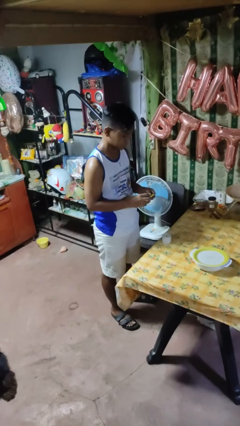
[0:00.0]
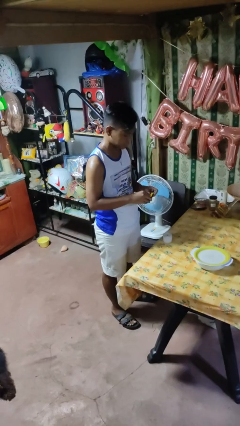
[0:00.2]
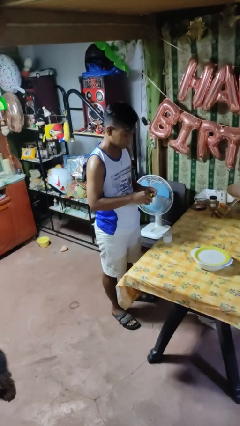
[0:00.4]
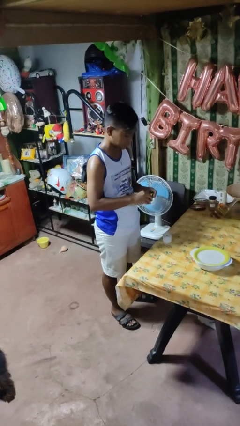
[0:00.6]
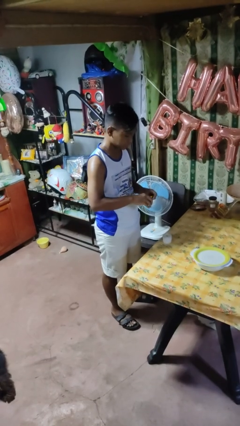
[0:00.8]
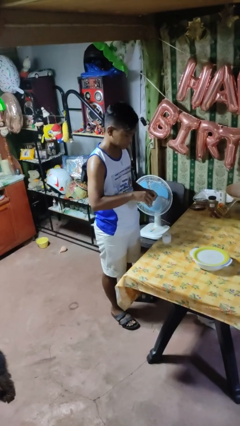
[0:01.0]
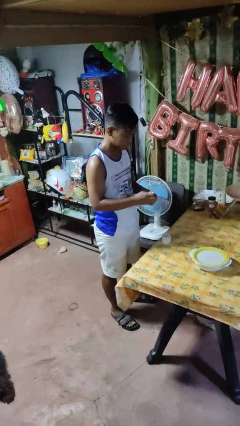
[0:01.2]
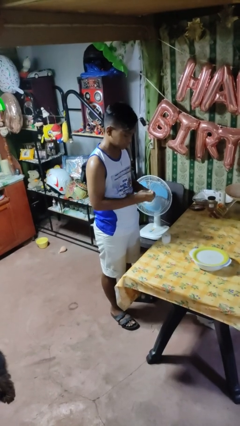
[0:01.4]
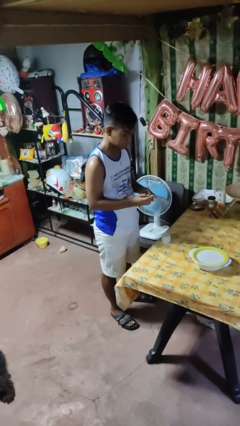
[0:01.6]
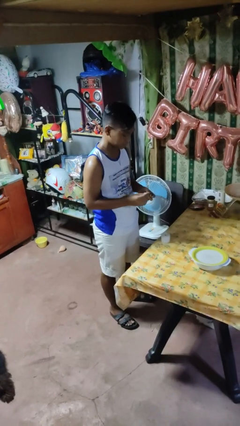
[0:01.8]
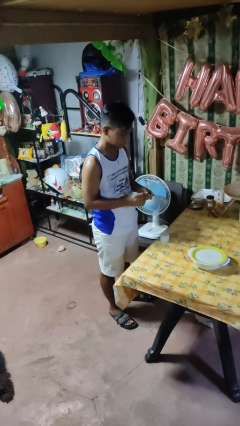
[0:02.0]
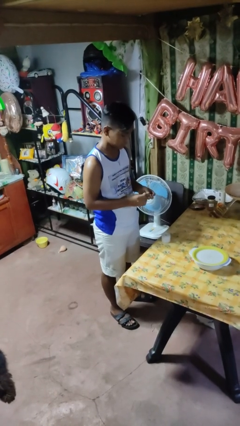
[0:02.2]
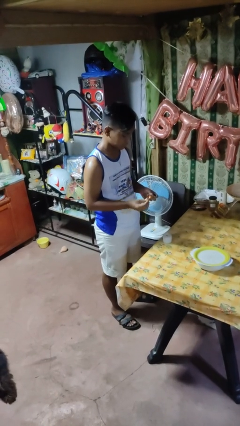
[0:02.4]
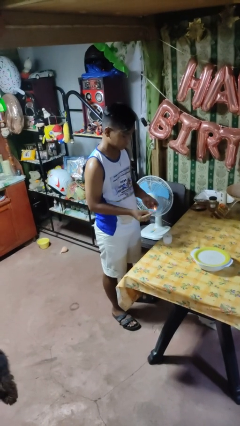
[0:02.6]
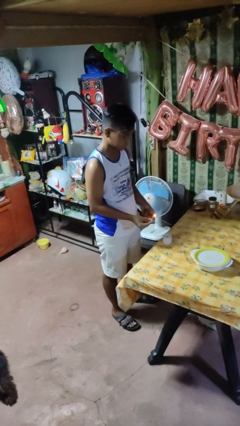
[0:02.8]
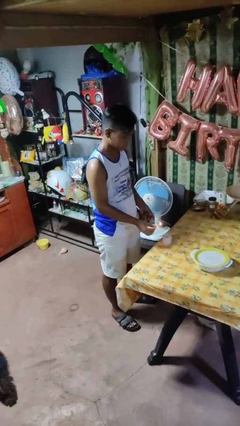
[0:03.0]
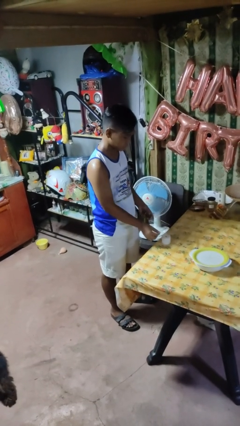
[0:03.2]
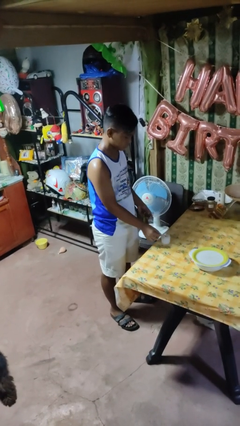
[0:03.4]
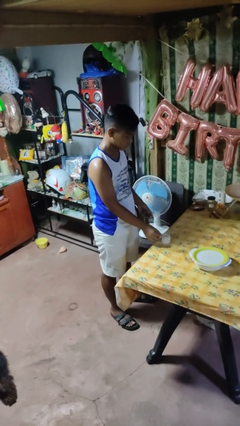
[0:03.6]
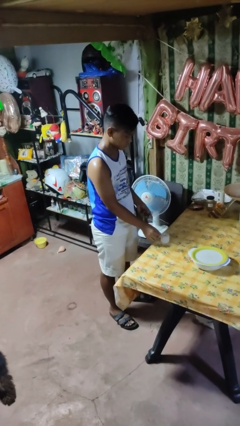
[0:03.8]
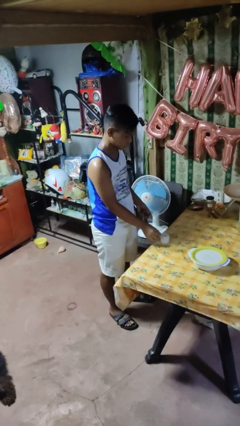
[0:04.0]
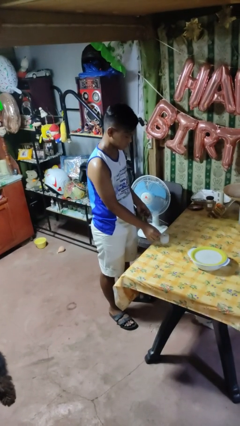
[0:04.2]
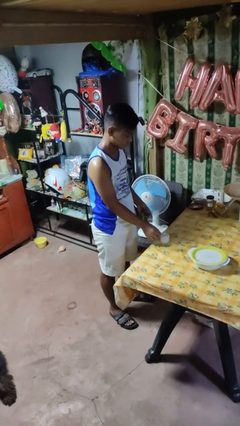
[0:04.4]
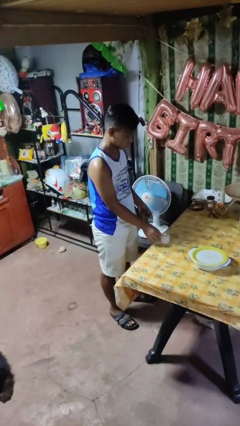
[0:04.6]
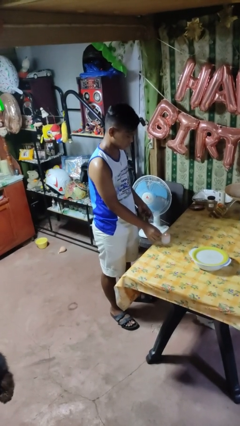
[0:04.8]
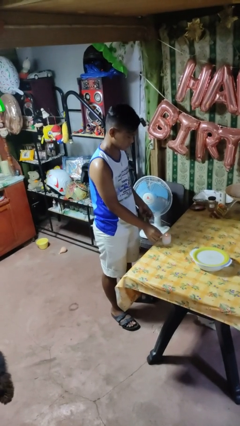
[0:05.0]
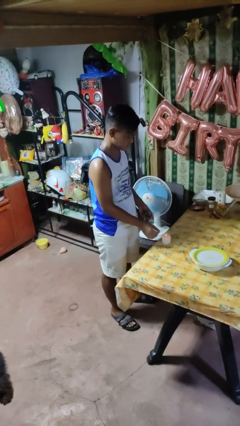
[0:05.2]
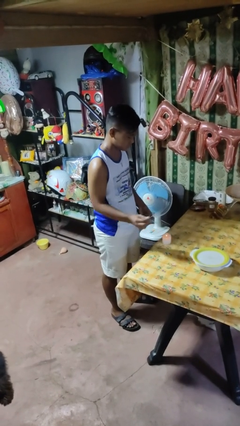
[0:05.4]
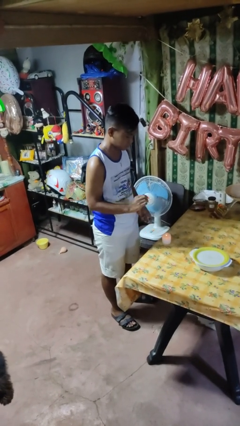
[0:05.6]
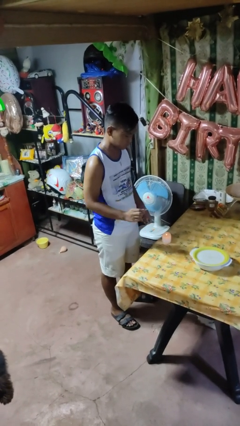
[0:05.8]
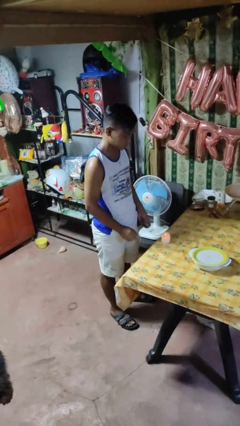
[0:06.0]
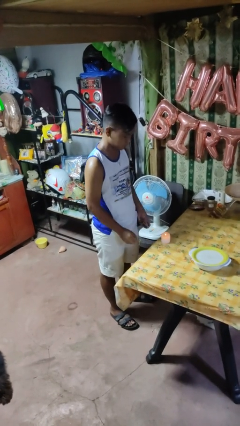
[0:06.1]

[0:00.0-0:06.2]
person lights candle

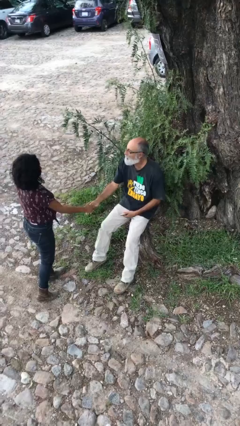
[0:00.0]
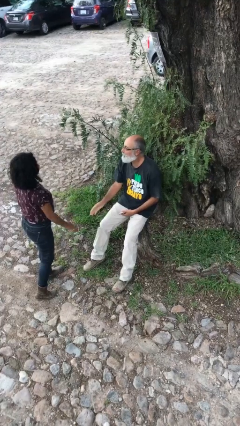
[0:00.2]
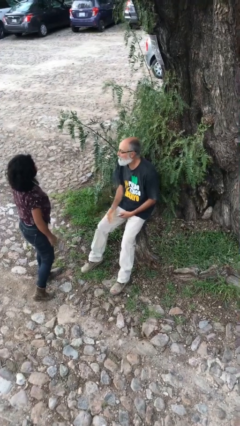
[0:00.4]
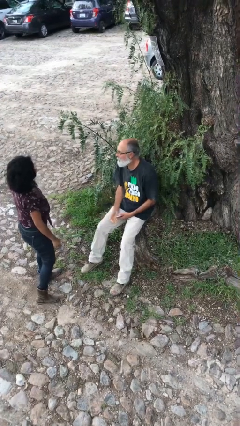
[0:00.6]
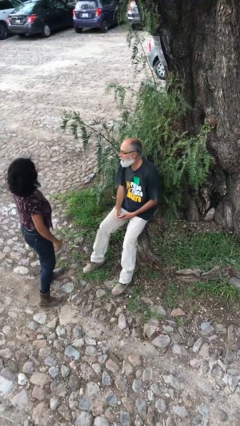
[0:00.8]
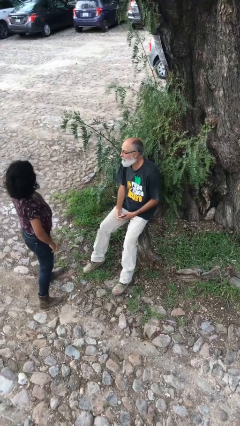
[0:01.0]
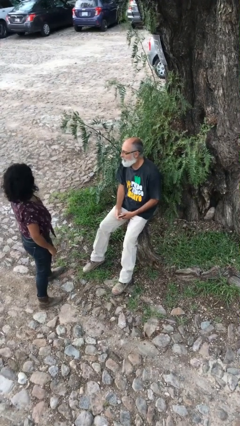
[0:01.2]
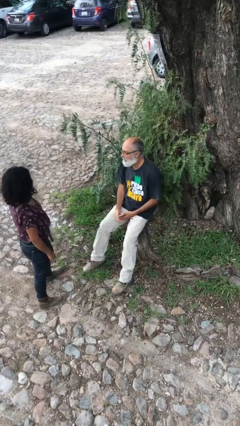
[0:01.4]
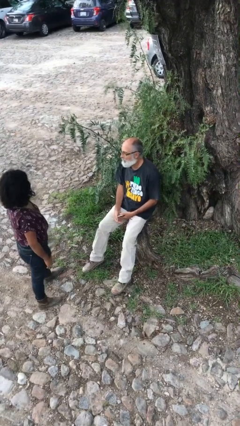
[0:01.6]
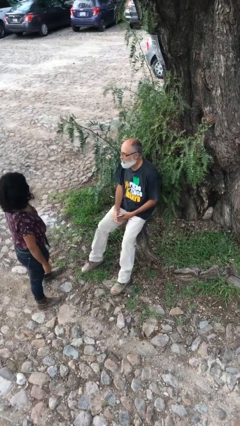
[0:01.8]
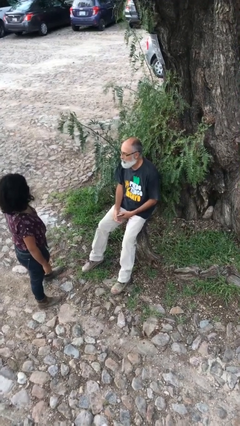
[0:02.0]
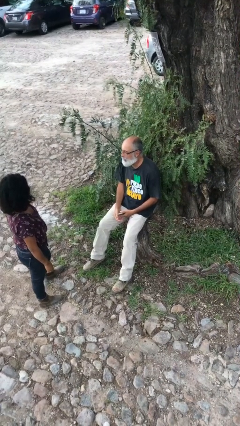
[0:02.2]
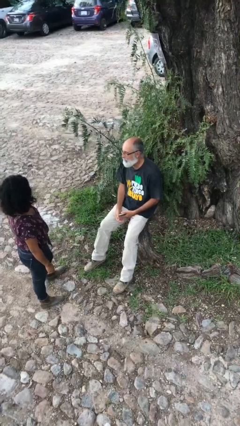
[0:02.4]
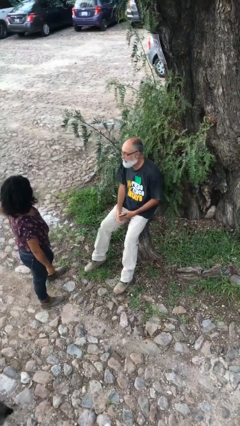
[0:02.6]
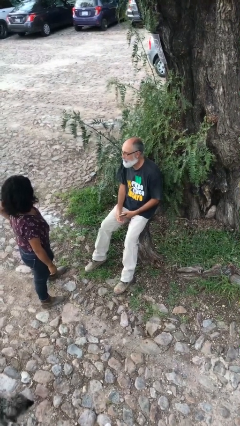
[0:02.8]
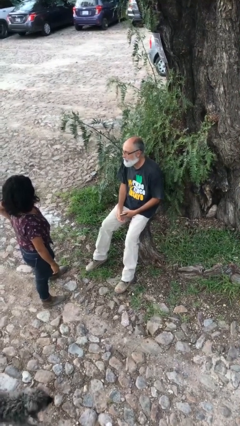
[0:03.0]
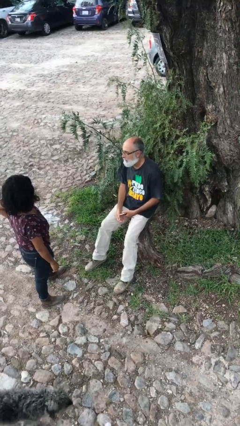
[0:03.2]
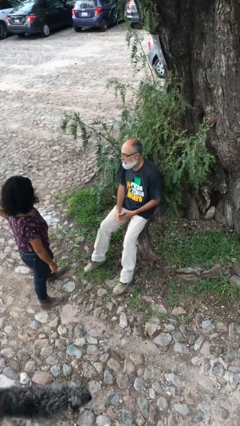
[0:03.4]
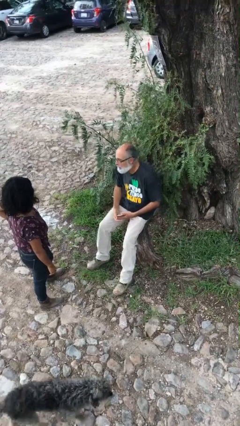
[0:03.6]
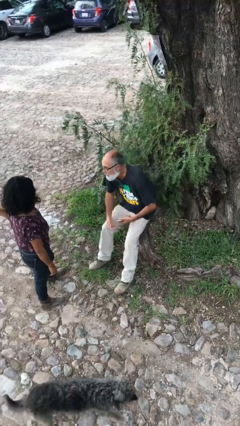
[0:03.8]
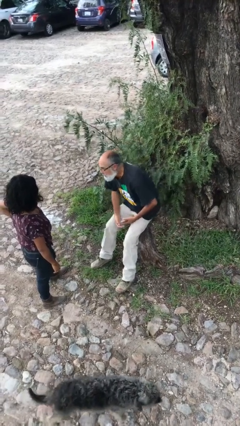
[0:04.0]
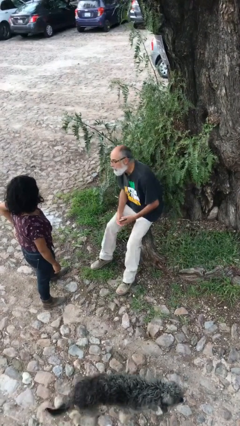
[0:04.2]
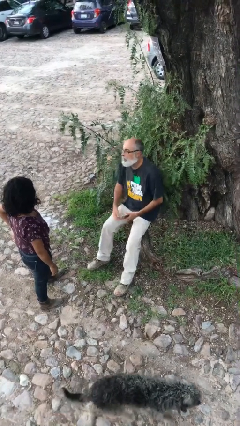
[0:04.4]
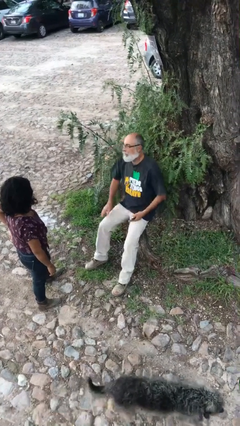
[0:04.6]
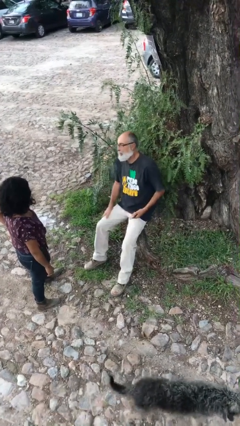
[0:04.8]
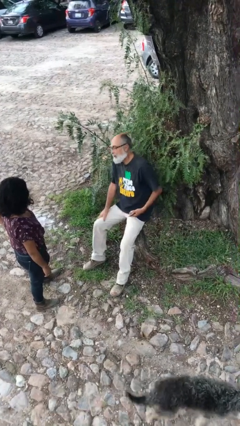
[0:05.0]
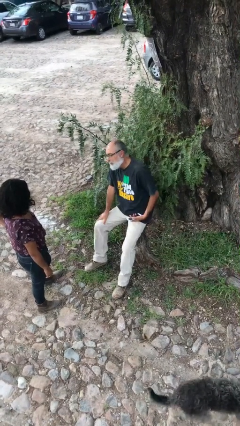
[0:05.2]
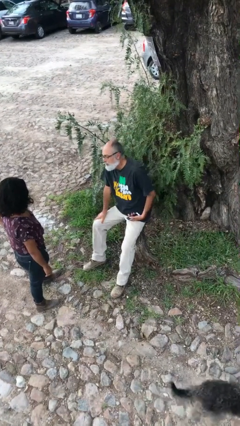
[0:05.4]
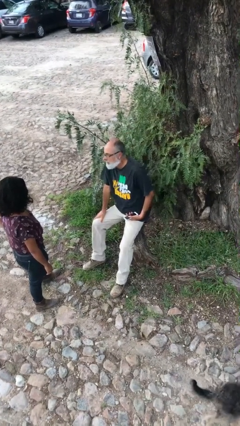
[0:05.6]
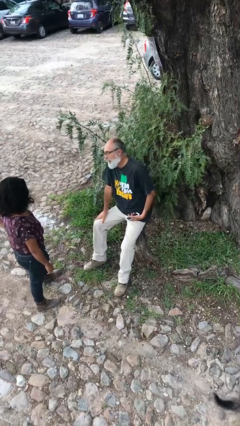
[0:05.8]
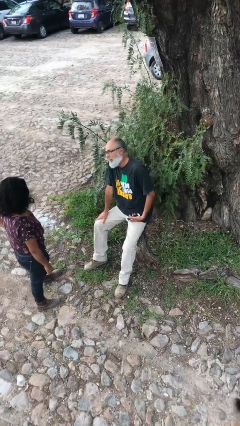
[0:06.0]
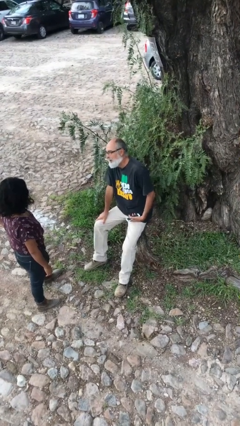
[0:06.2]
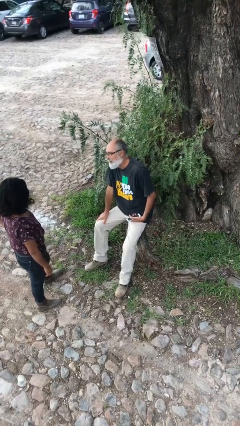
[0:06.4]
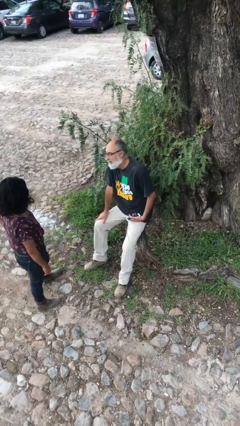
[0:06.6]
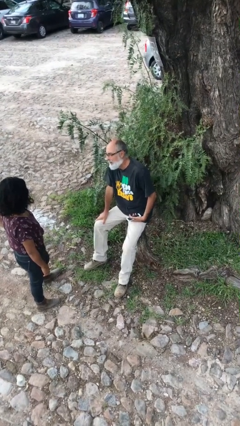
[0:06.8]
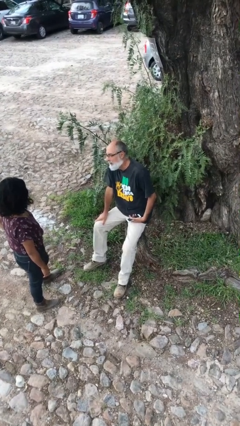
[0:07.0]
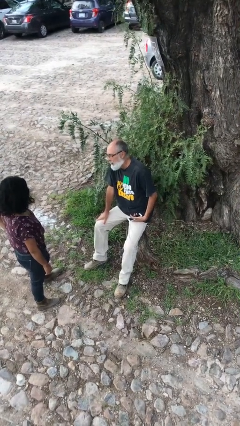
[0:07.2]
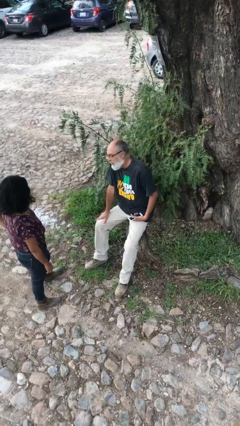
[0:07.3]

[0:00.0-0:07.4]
person talks to person

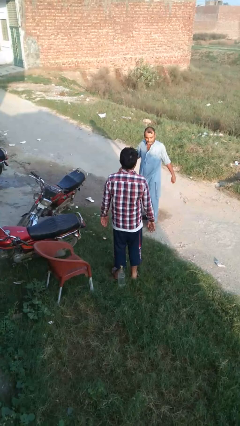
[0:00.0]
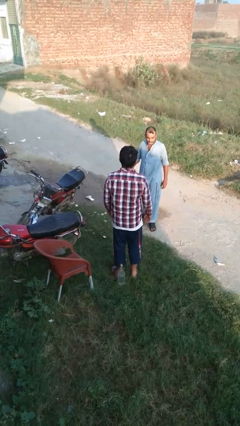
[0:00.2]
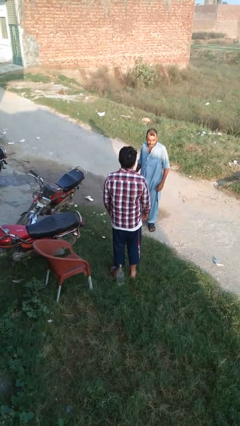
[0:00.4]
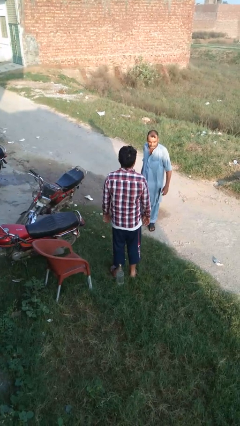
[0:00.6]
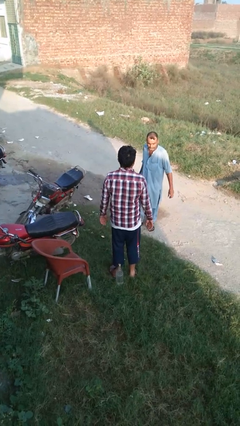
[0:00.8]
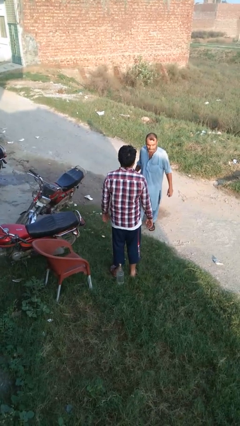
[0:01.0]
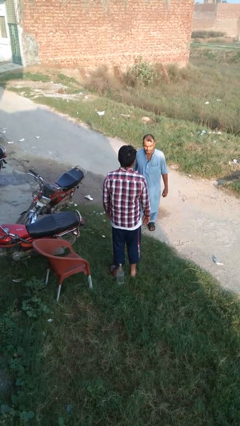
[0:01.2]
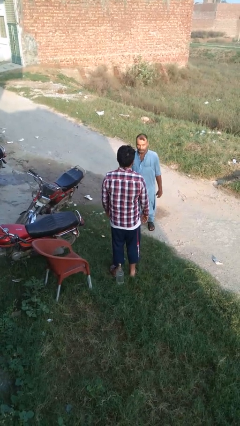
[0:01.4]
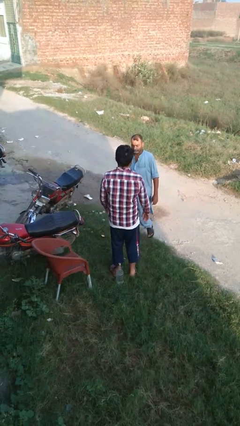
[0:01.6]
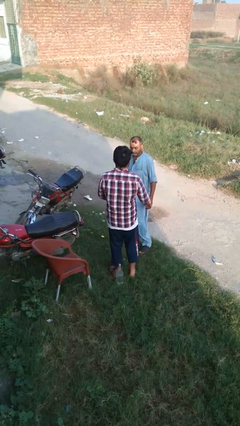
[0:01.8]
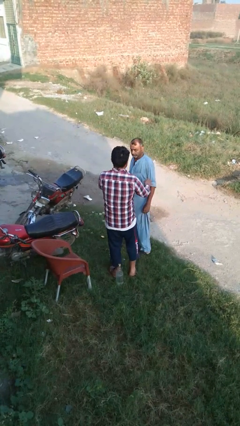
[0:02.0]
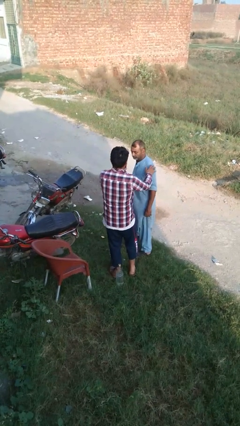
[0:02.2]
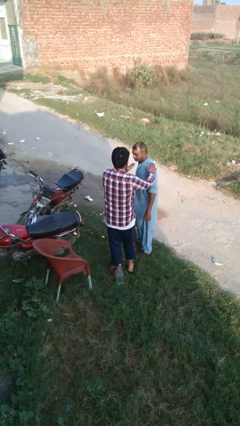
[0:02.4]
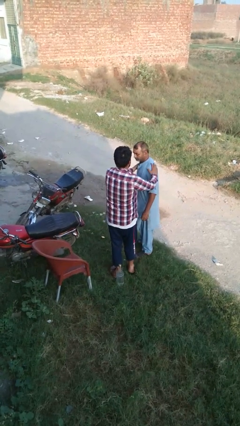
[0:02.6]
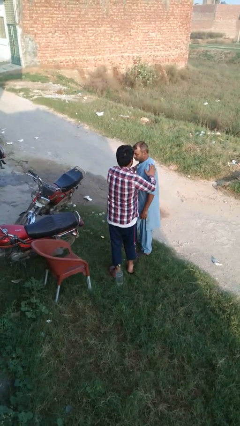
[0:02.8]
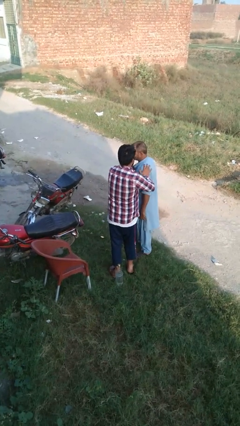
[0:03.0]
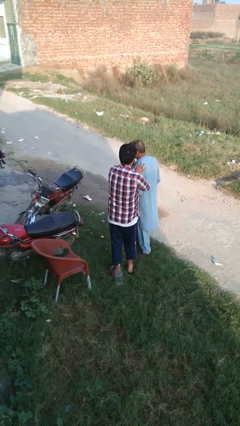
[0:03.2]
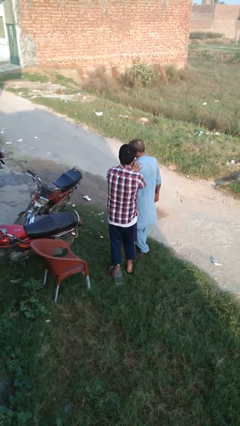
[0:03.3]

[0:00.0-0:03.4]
person grabs person by shoulder

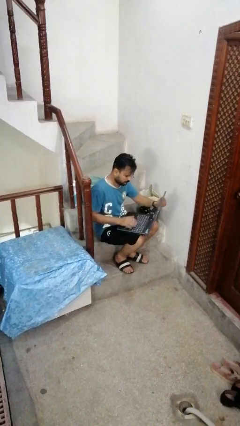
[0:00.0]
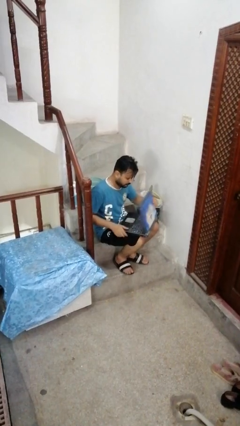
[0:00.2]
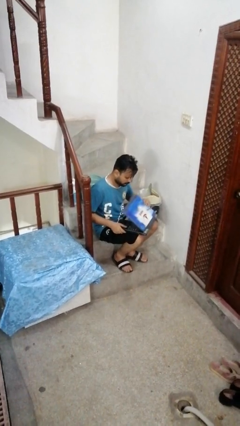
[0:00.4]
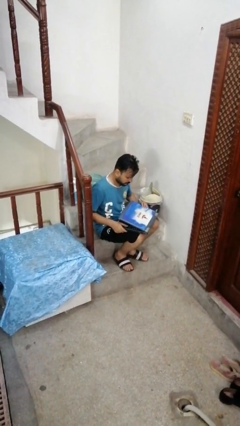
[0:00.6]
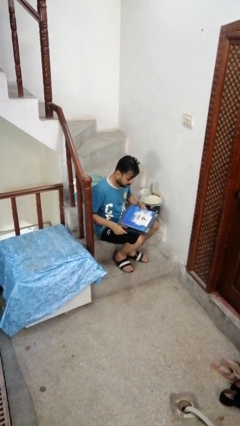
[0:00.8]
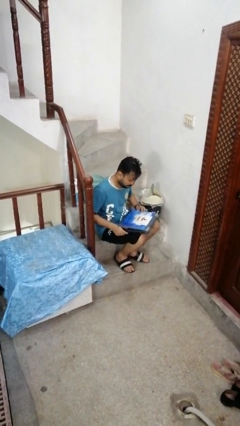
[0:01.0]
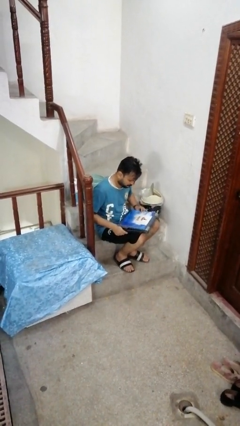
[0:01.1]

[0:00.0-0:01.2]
person closes laptop
